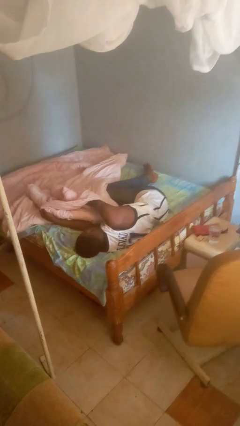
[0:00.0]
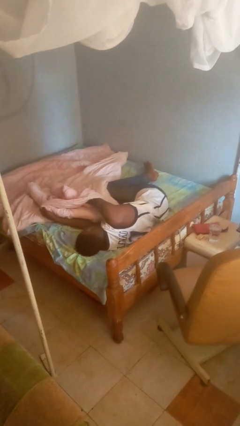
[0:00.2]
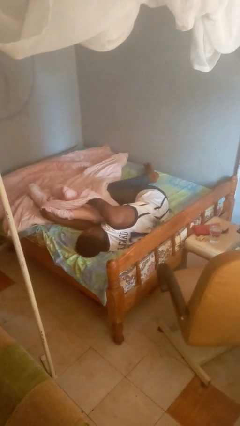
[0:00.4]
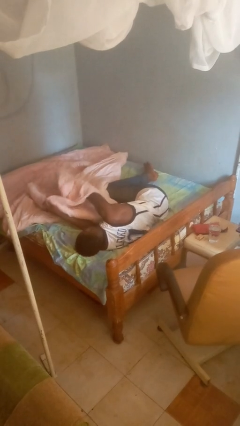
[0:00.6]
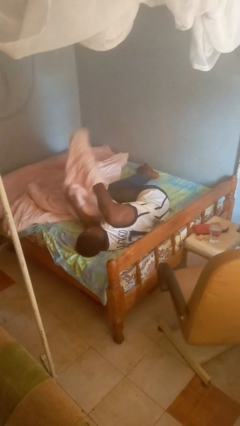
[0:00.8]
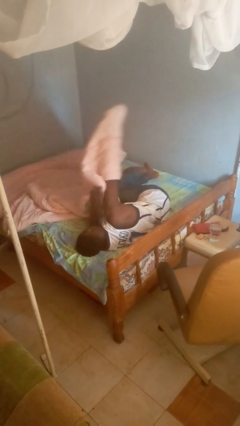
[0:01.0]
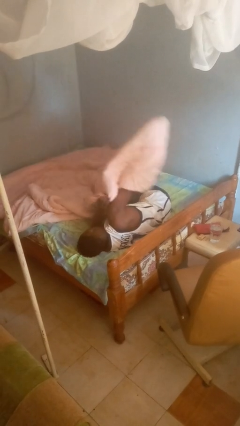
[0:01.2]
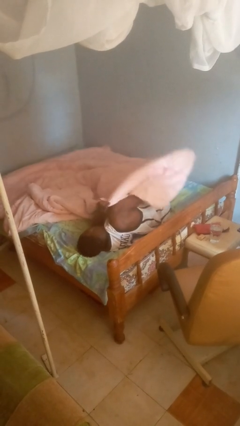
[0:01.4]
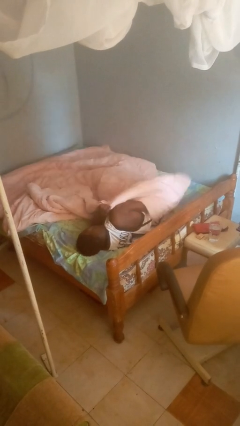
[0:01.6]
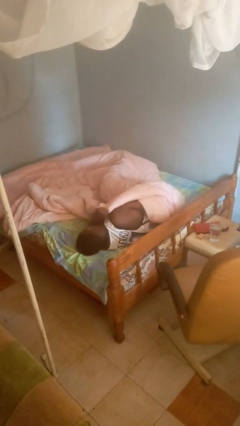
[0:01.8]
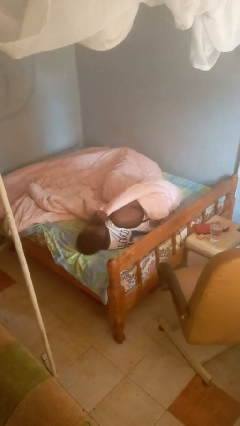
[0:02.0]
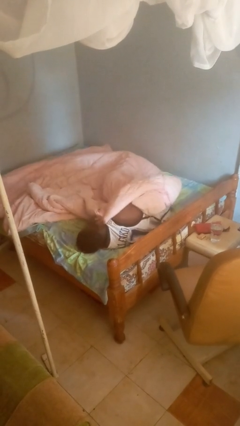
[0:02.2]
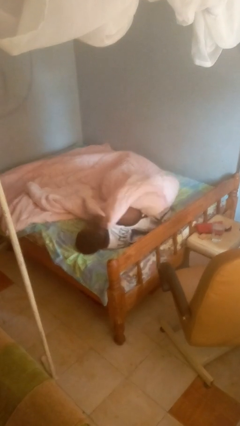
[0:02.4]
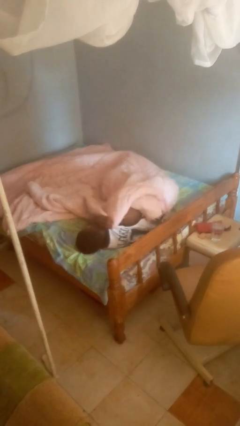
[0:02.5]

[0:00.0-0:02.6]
person covers with blanket

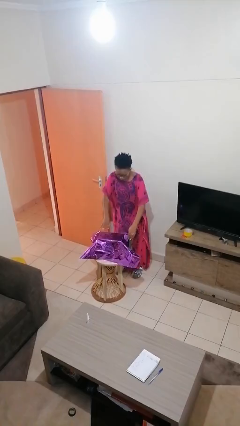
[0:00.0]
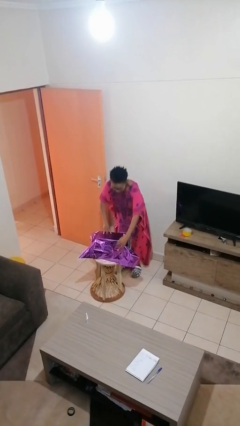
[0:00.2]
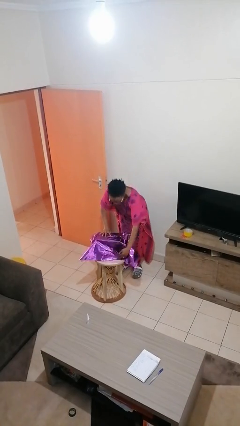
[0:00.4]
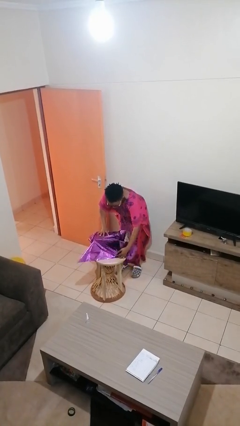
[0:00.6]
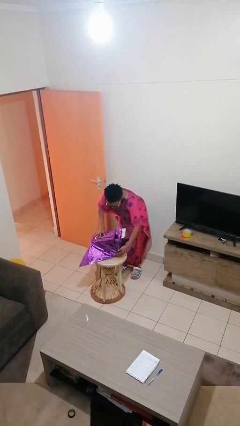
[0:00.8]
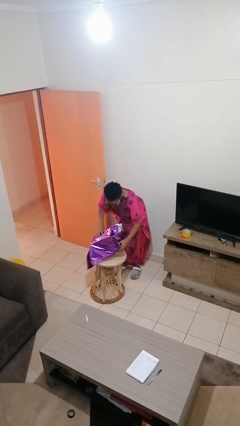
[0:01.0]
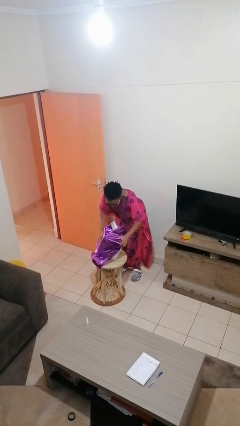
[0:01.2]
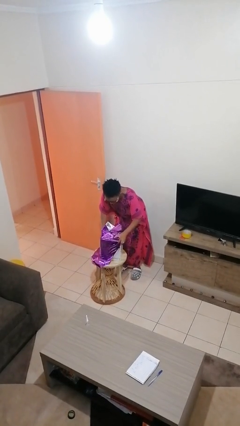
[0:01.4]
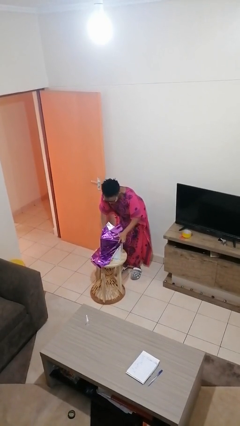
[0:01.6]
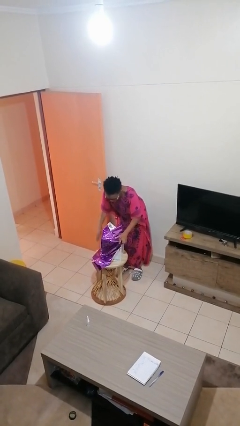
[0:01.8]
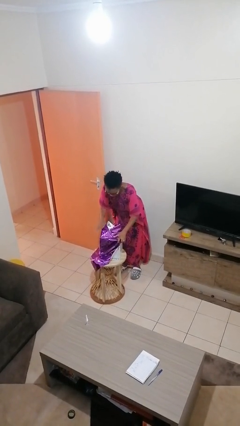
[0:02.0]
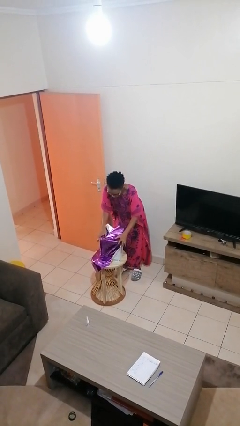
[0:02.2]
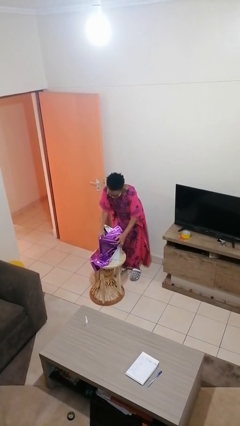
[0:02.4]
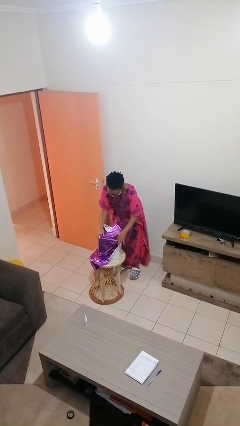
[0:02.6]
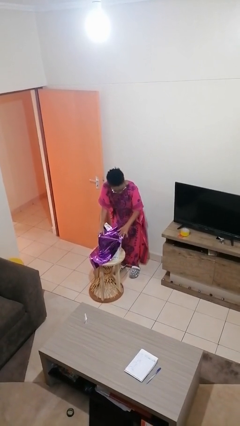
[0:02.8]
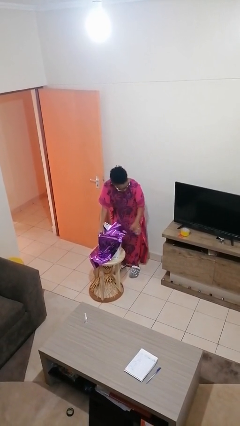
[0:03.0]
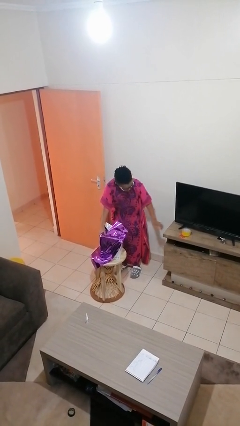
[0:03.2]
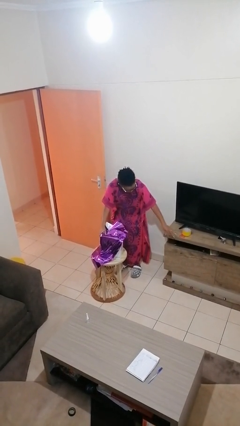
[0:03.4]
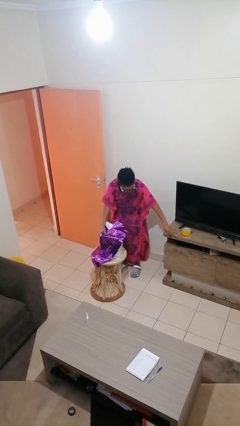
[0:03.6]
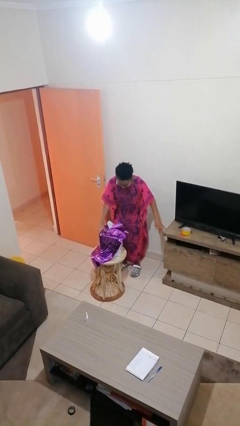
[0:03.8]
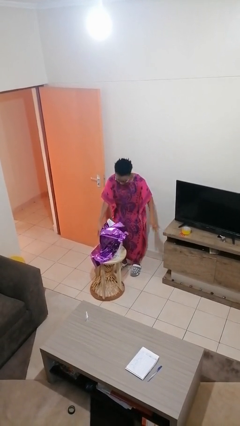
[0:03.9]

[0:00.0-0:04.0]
person wraps box

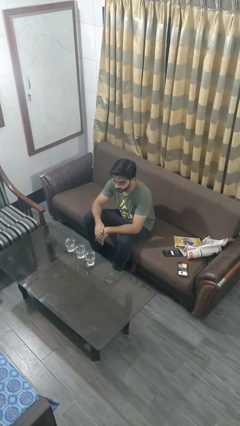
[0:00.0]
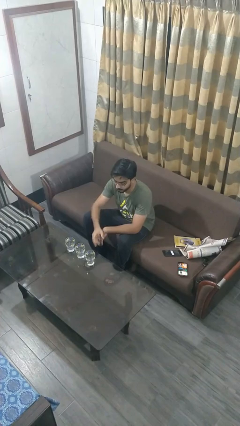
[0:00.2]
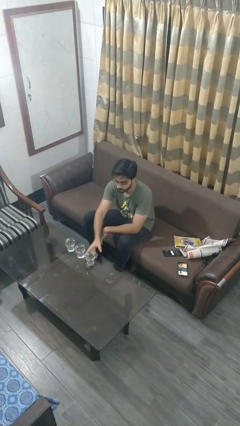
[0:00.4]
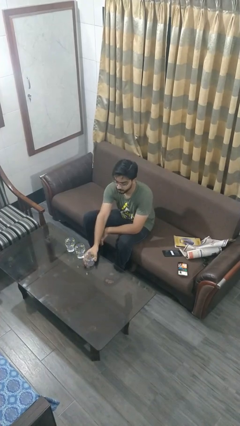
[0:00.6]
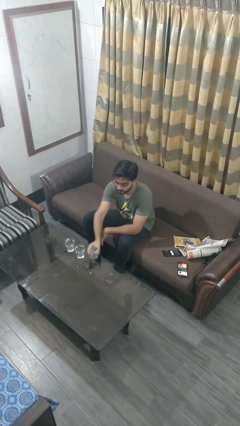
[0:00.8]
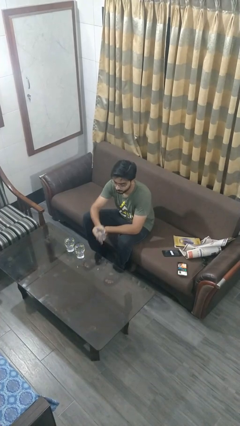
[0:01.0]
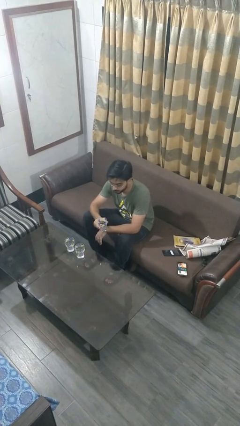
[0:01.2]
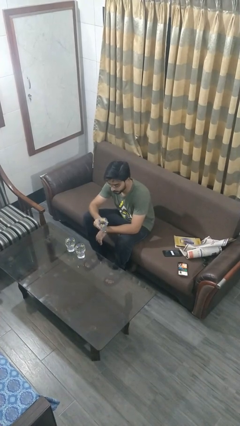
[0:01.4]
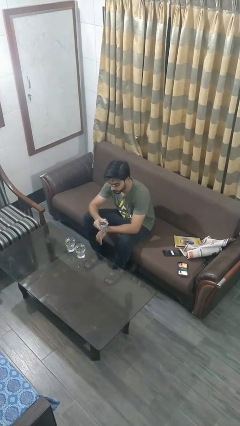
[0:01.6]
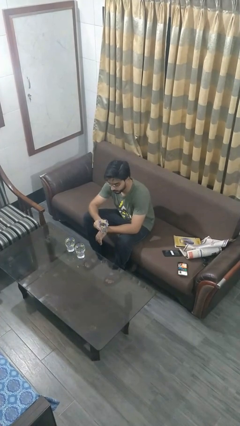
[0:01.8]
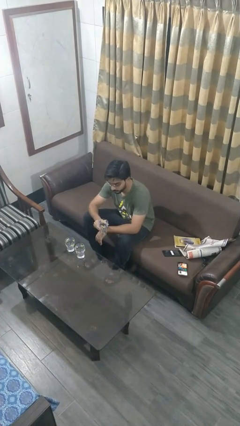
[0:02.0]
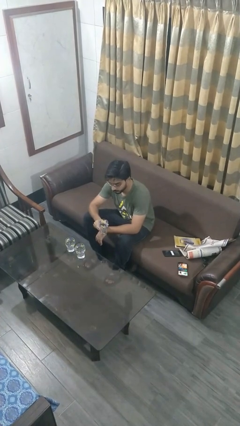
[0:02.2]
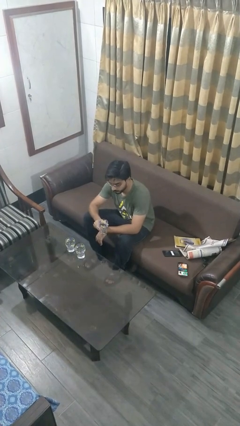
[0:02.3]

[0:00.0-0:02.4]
person picks up object from table

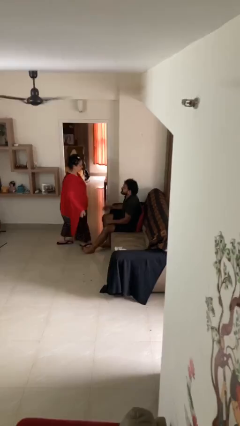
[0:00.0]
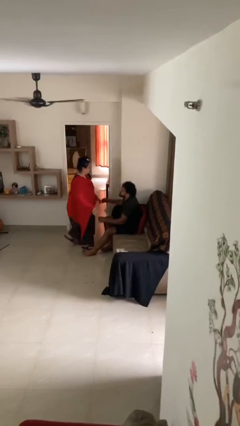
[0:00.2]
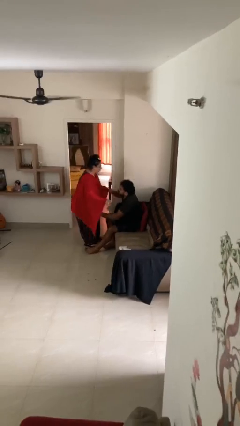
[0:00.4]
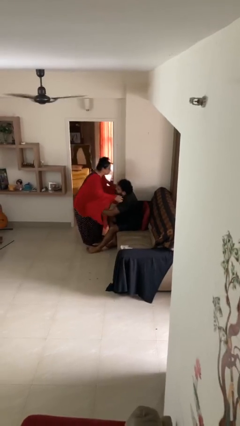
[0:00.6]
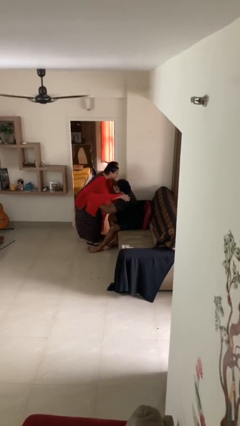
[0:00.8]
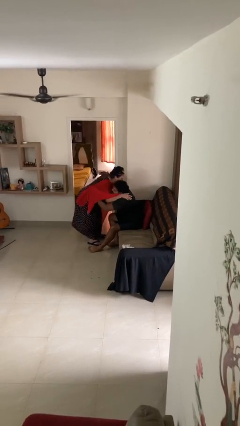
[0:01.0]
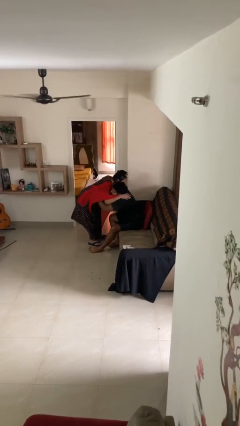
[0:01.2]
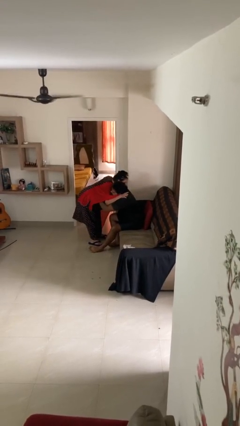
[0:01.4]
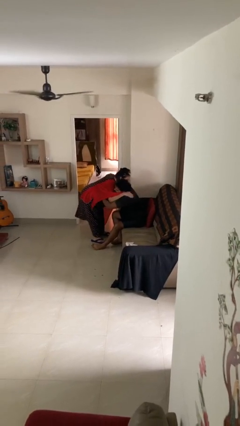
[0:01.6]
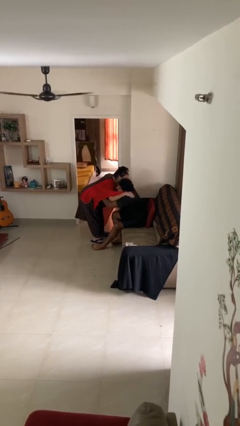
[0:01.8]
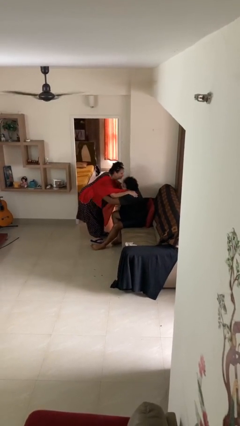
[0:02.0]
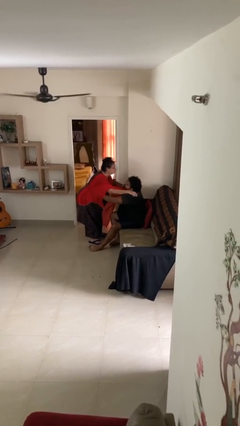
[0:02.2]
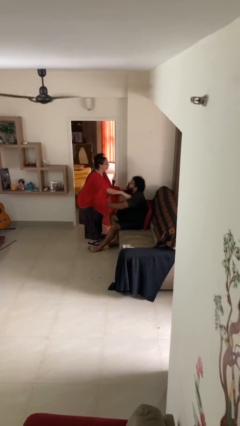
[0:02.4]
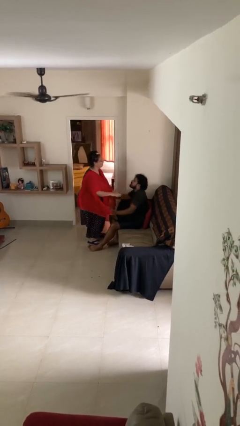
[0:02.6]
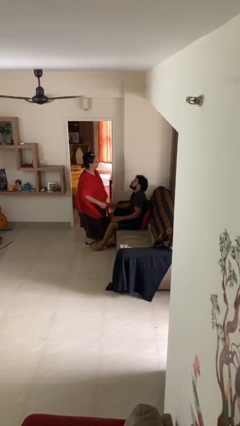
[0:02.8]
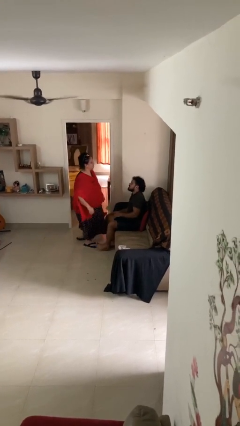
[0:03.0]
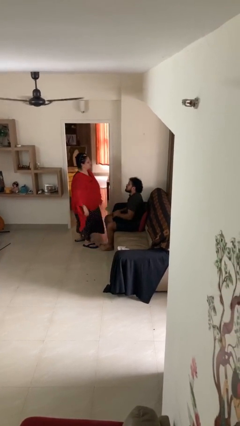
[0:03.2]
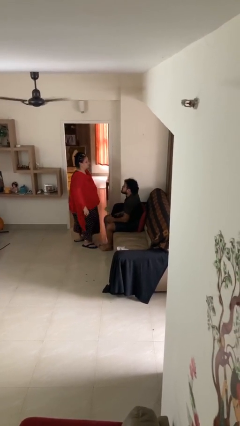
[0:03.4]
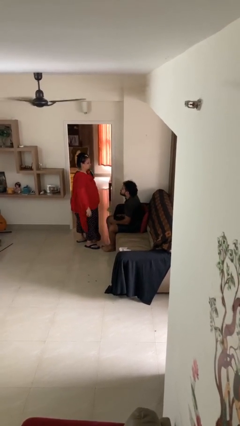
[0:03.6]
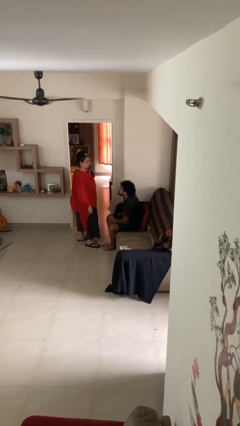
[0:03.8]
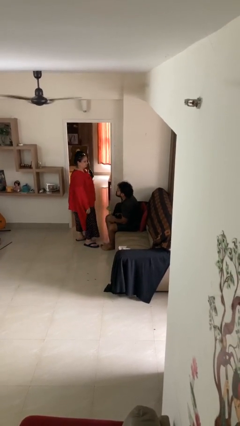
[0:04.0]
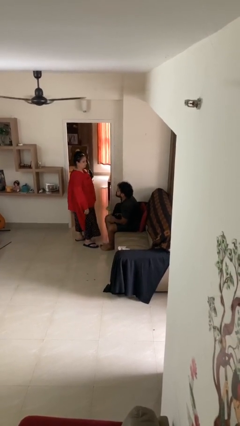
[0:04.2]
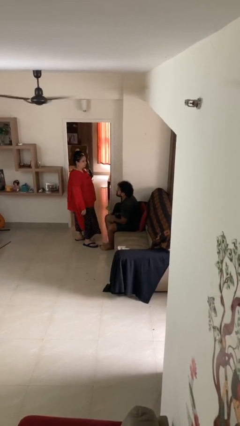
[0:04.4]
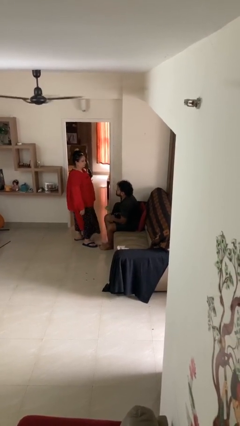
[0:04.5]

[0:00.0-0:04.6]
person embraces person

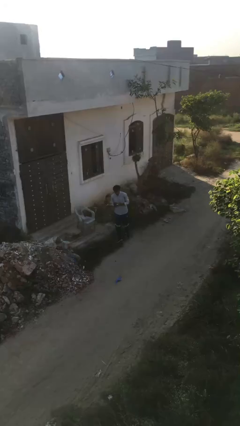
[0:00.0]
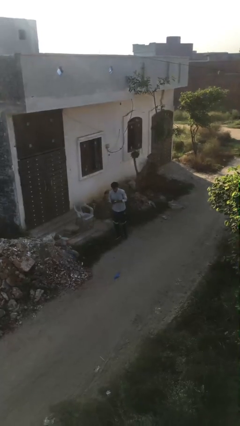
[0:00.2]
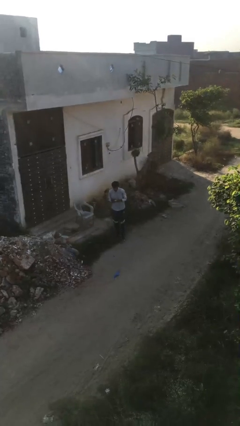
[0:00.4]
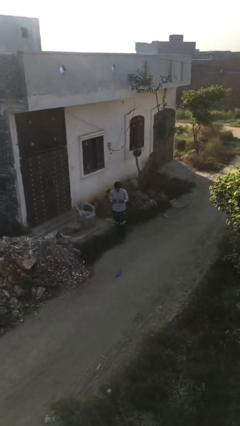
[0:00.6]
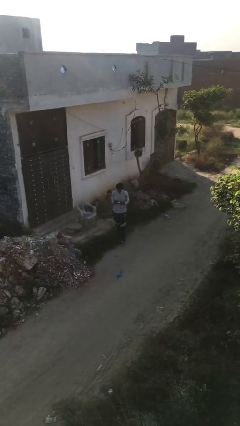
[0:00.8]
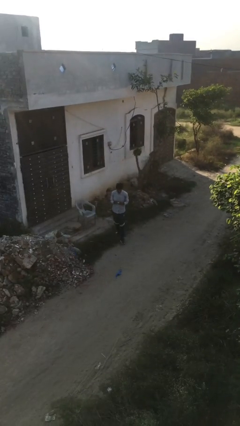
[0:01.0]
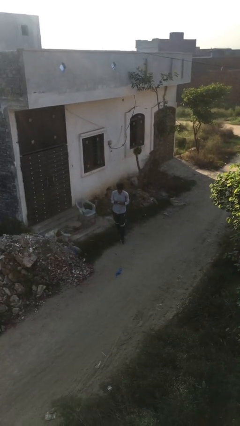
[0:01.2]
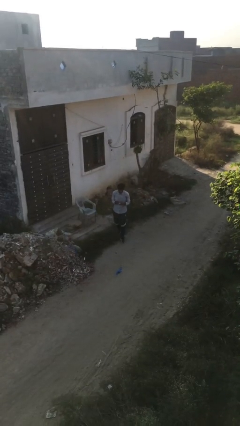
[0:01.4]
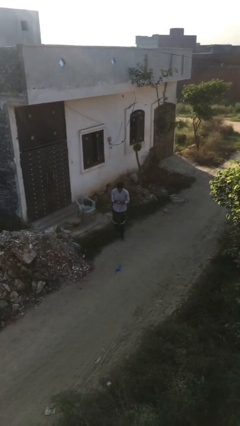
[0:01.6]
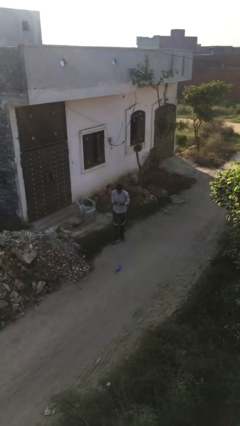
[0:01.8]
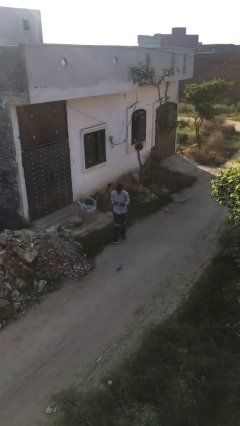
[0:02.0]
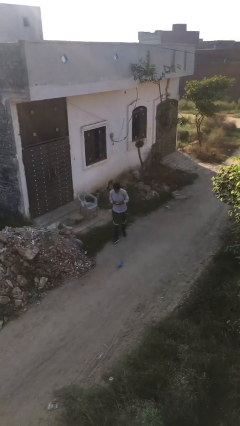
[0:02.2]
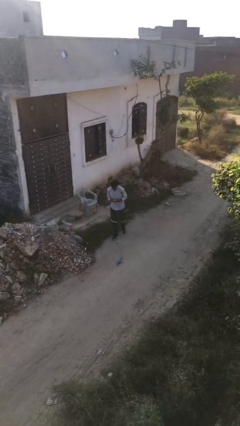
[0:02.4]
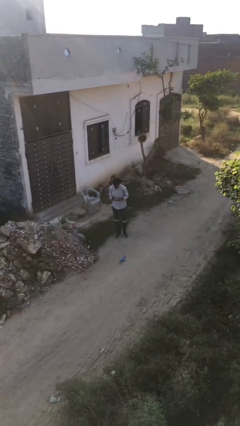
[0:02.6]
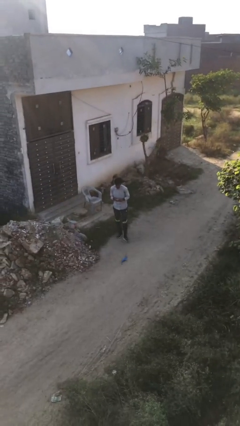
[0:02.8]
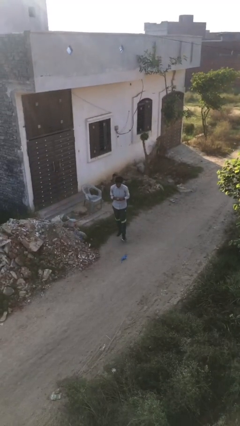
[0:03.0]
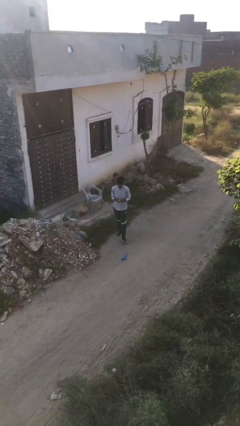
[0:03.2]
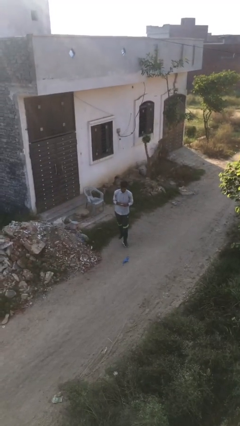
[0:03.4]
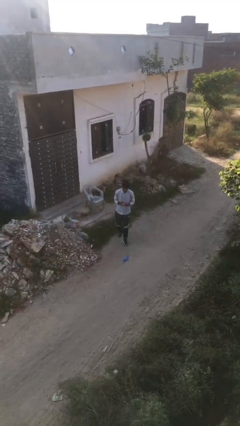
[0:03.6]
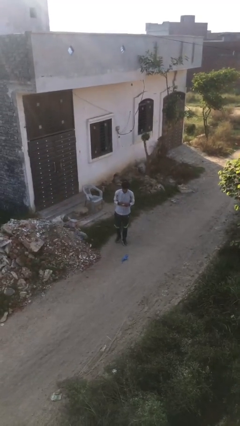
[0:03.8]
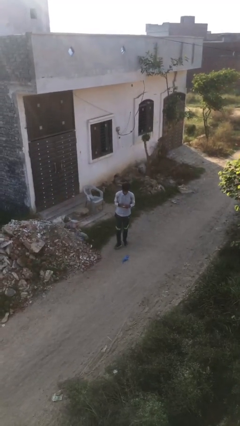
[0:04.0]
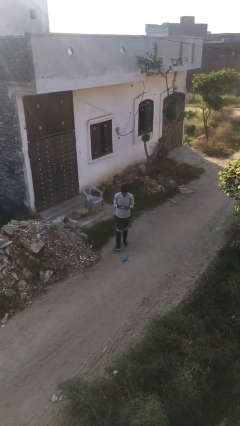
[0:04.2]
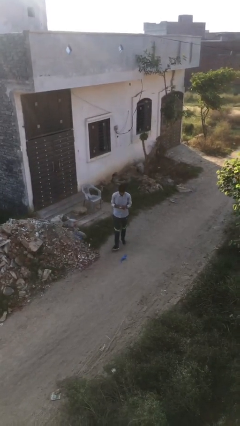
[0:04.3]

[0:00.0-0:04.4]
person texts on phone
